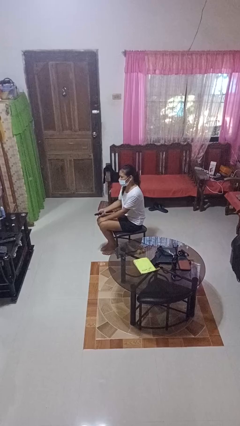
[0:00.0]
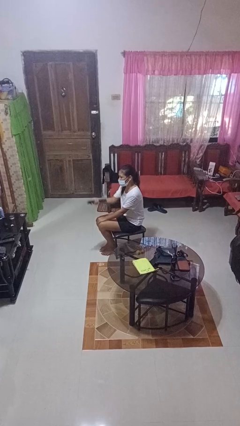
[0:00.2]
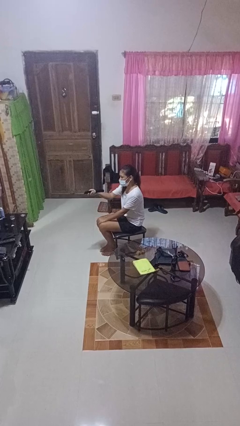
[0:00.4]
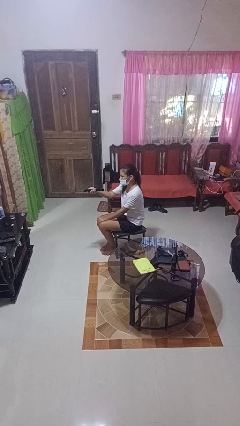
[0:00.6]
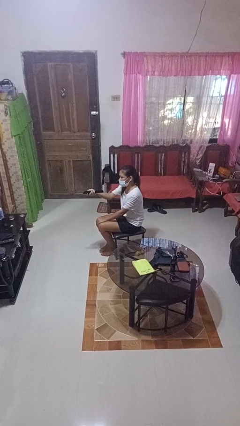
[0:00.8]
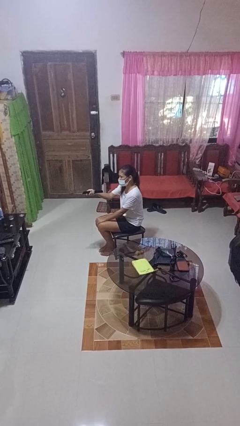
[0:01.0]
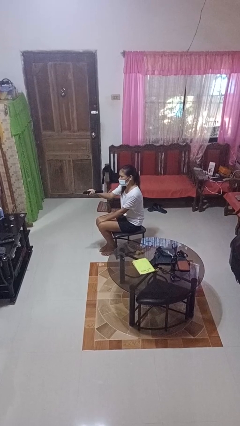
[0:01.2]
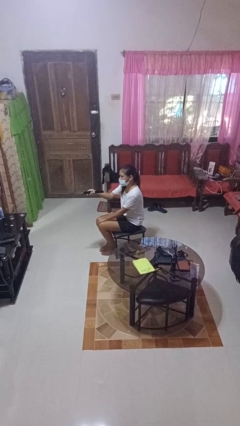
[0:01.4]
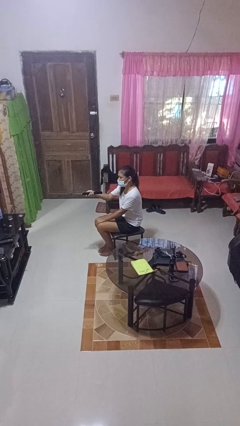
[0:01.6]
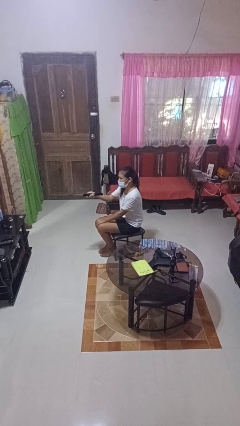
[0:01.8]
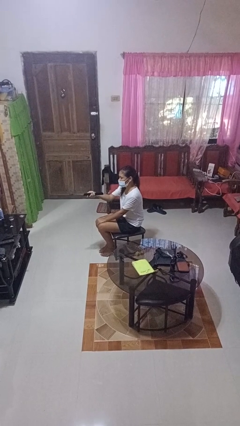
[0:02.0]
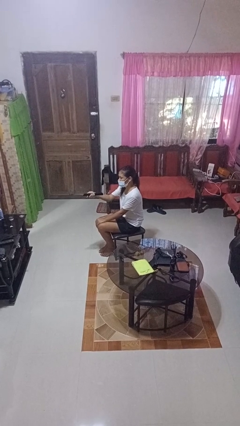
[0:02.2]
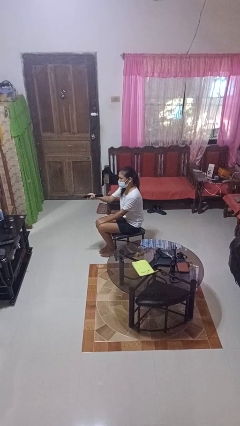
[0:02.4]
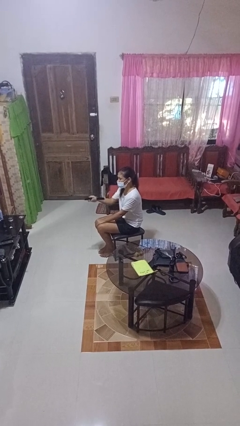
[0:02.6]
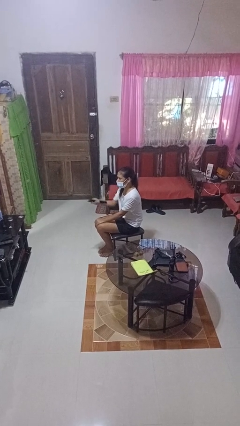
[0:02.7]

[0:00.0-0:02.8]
person uses television remote

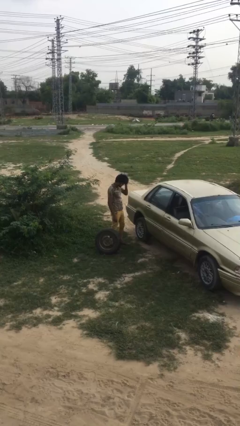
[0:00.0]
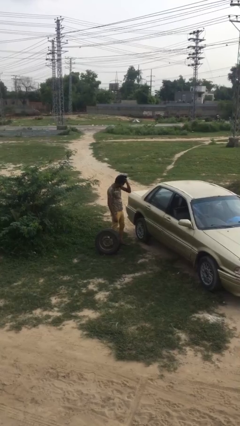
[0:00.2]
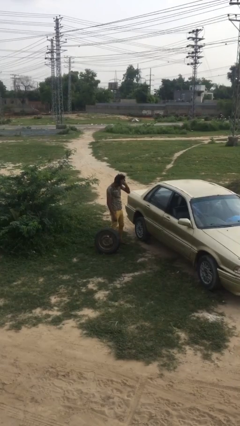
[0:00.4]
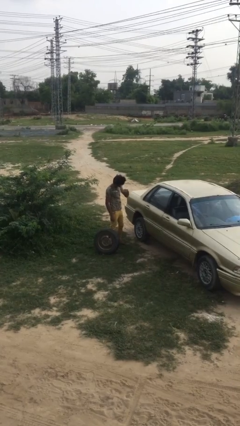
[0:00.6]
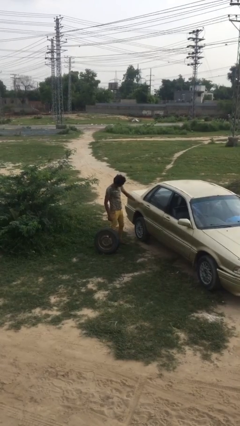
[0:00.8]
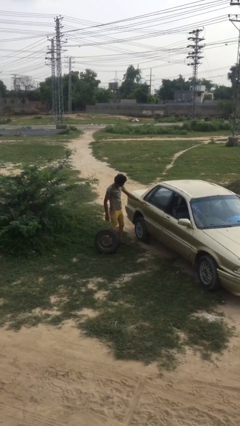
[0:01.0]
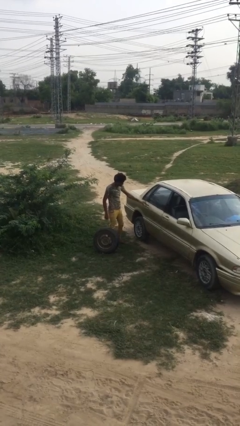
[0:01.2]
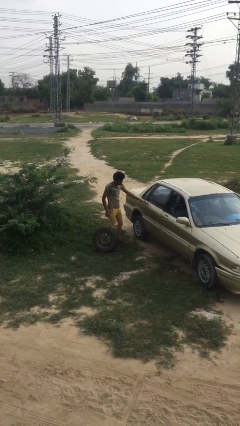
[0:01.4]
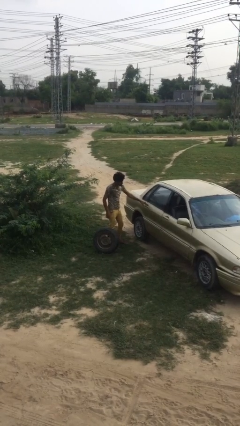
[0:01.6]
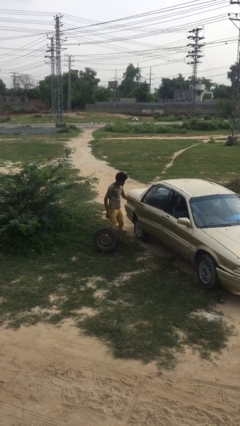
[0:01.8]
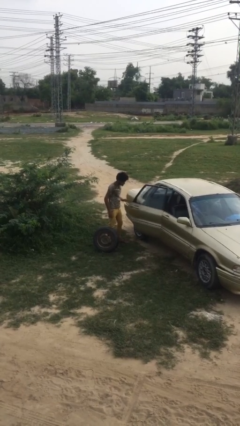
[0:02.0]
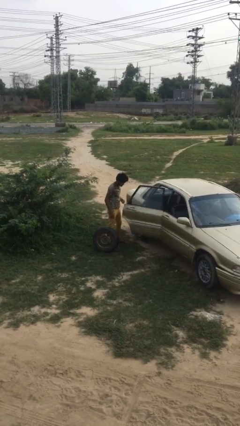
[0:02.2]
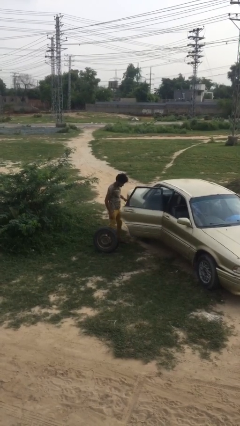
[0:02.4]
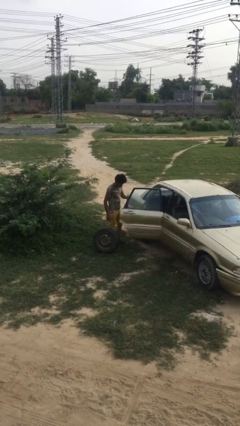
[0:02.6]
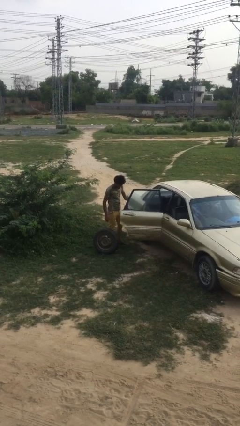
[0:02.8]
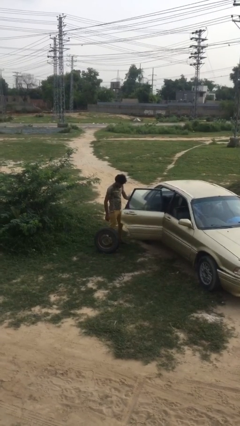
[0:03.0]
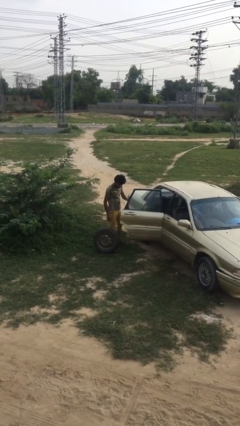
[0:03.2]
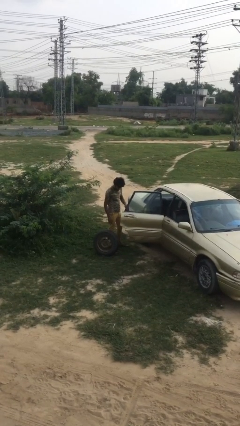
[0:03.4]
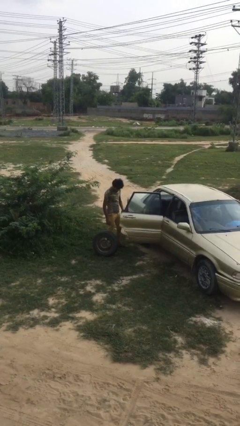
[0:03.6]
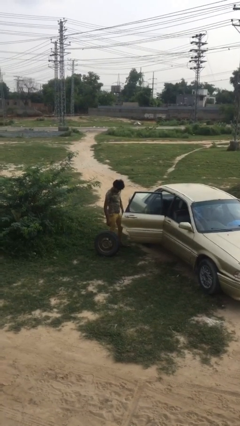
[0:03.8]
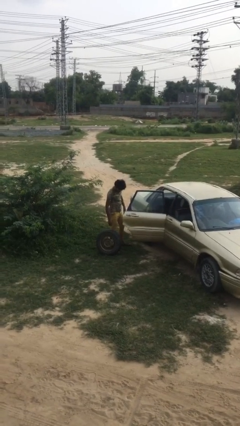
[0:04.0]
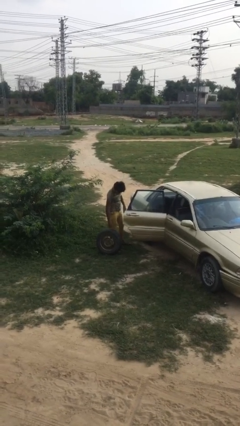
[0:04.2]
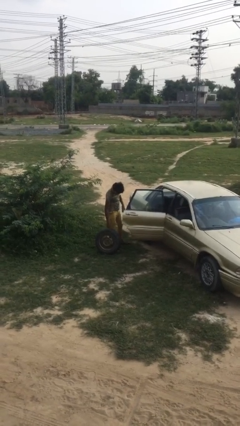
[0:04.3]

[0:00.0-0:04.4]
person opens car door

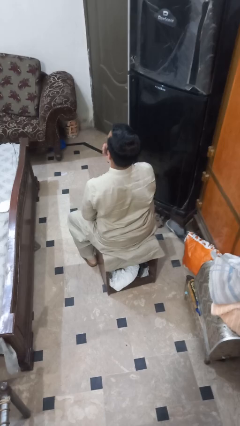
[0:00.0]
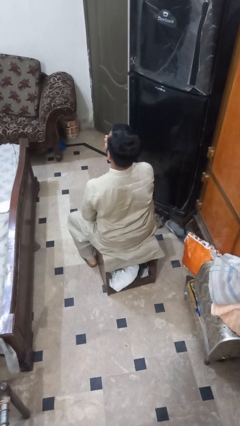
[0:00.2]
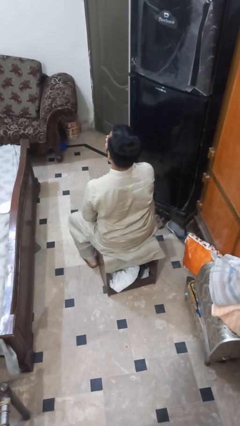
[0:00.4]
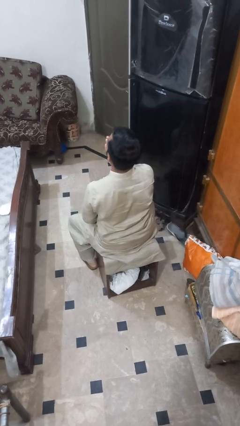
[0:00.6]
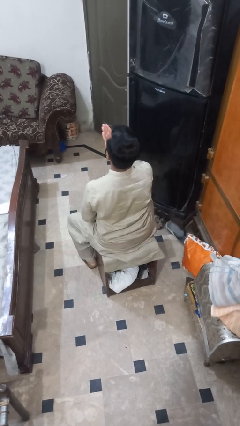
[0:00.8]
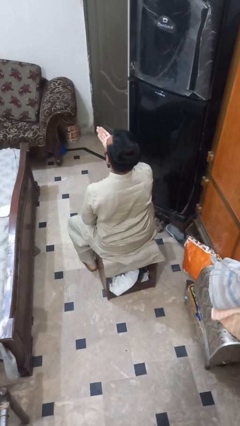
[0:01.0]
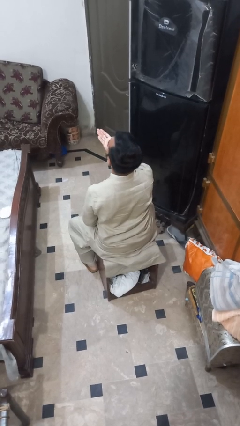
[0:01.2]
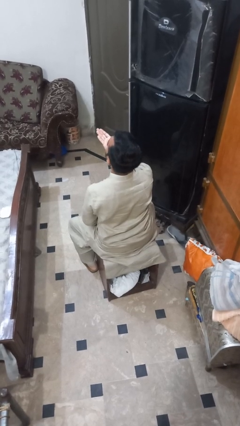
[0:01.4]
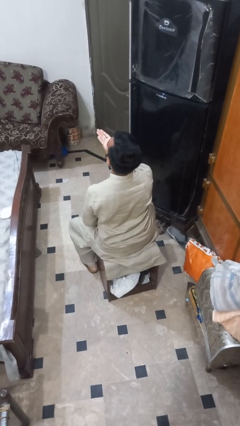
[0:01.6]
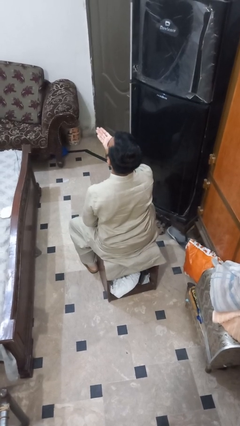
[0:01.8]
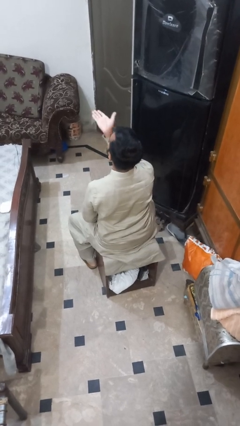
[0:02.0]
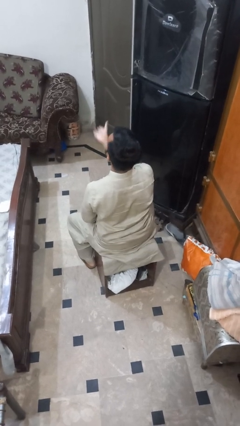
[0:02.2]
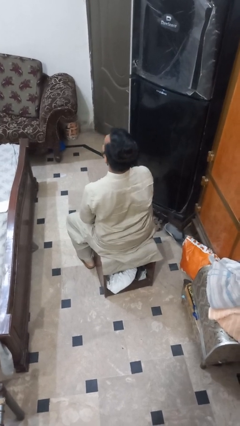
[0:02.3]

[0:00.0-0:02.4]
person gestures blow kiss

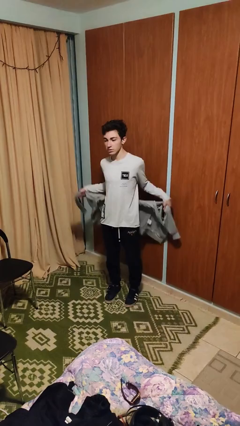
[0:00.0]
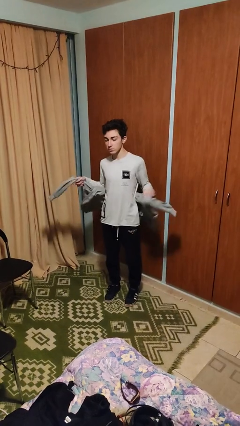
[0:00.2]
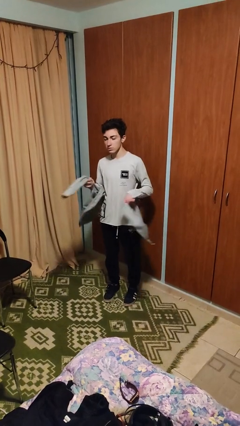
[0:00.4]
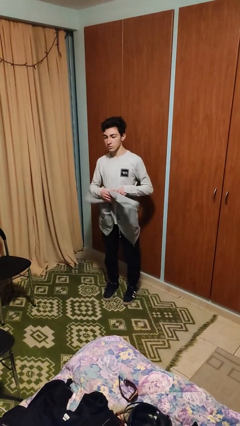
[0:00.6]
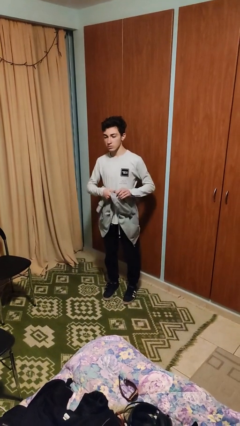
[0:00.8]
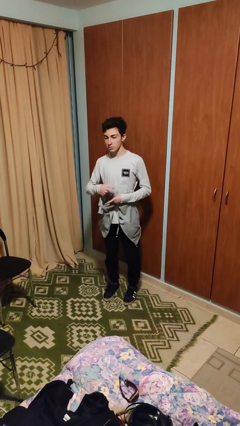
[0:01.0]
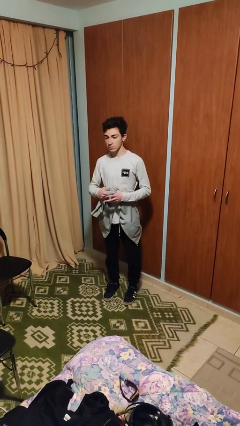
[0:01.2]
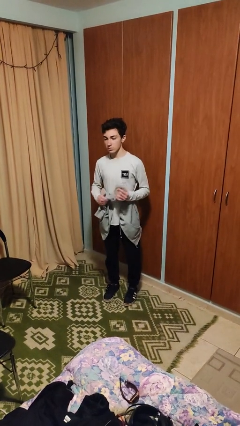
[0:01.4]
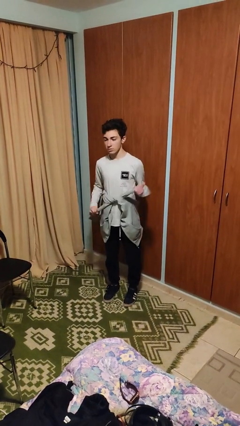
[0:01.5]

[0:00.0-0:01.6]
person ties jacket around waist

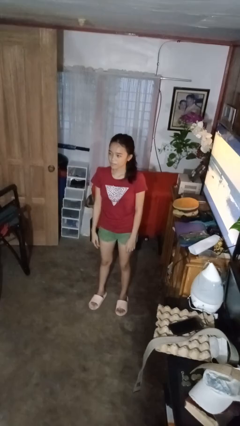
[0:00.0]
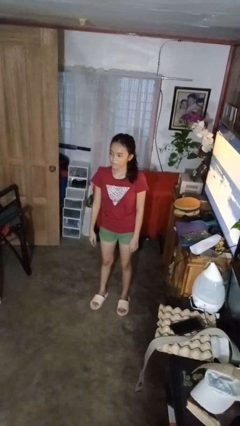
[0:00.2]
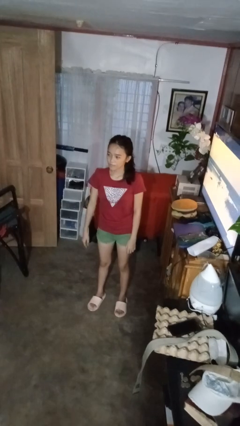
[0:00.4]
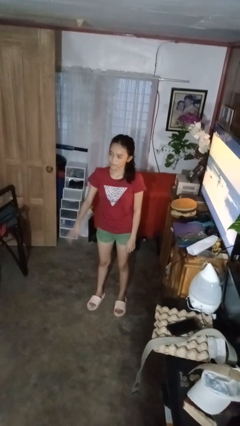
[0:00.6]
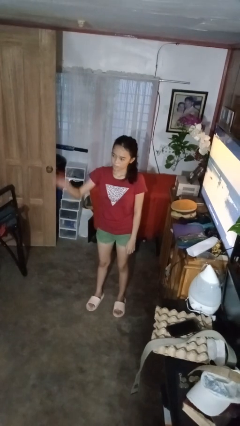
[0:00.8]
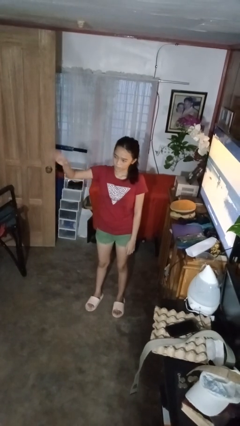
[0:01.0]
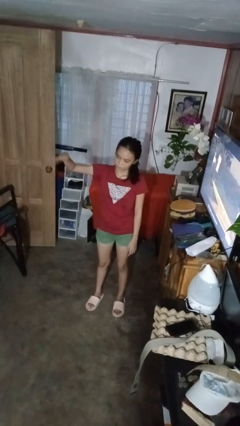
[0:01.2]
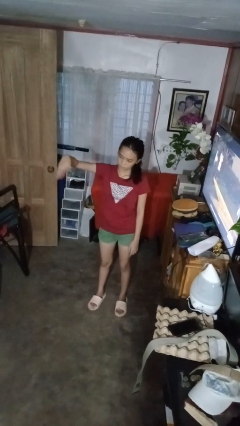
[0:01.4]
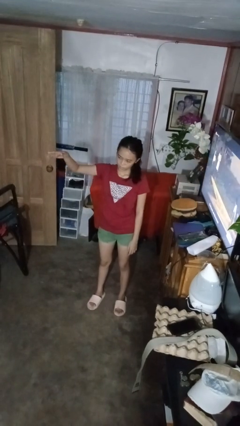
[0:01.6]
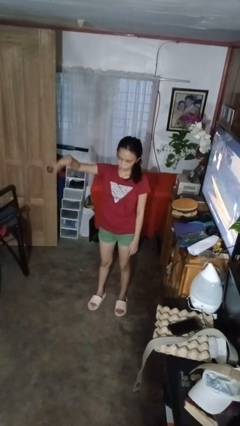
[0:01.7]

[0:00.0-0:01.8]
person gestures come here

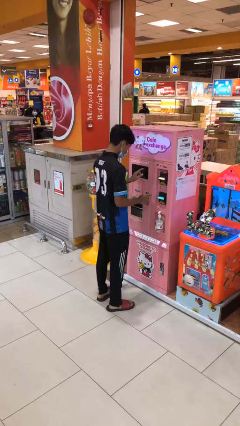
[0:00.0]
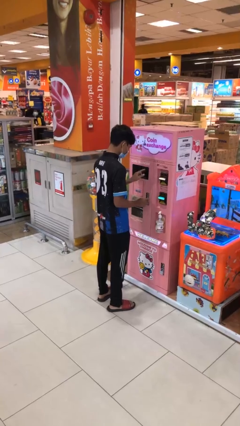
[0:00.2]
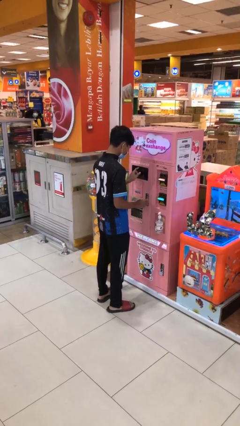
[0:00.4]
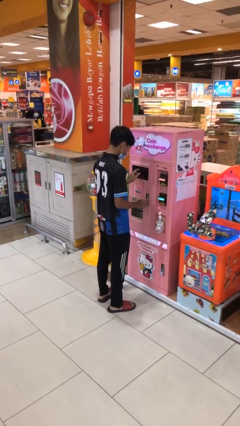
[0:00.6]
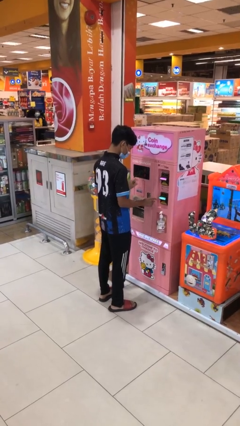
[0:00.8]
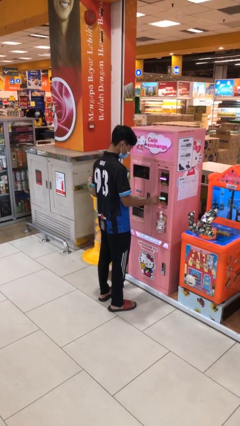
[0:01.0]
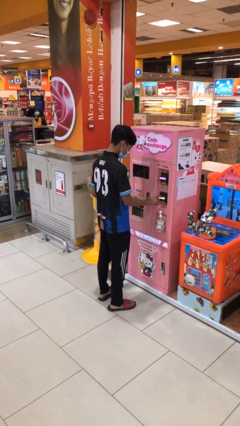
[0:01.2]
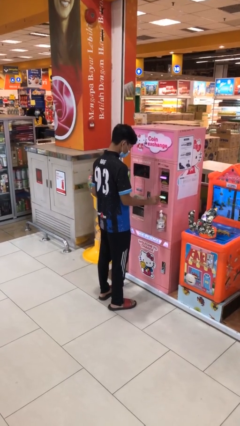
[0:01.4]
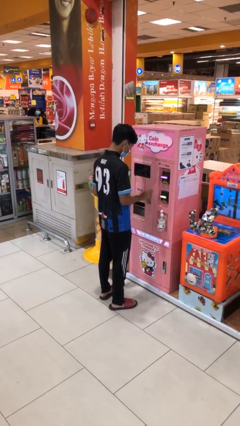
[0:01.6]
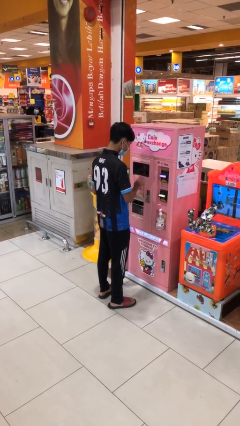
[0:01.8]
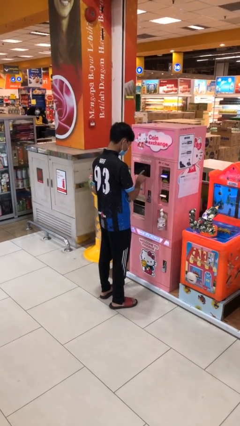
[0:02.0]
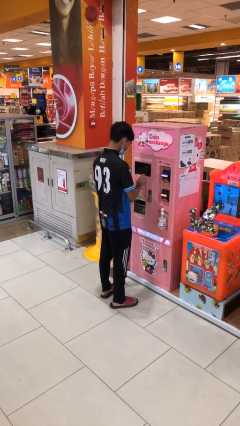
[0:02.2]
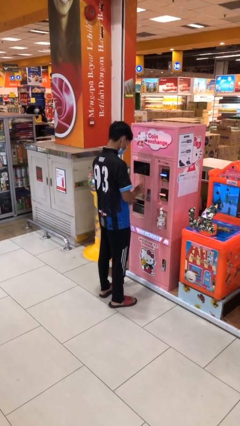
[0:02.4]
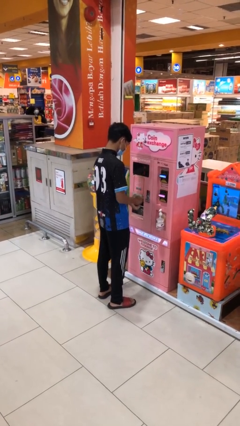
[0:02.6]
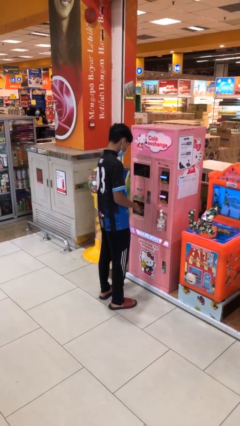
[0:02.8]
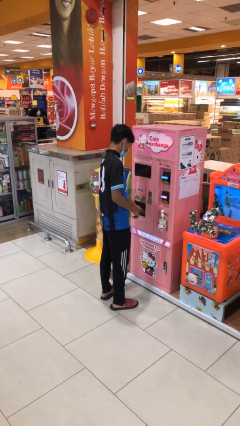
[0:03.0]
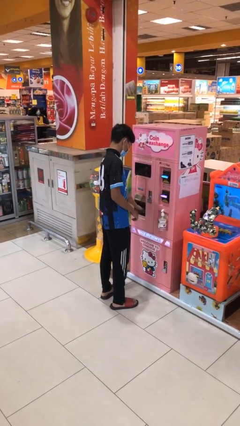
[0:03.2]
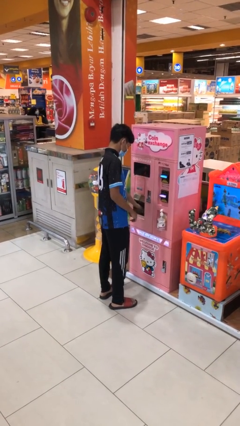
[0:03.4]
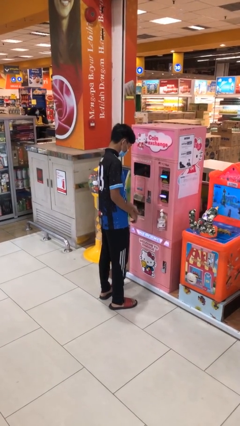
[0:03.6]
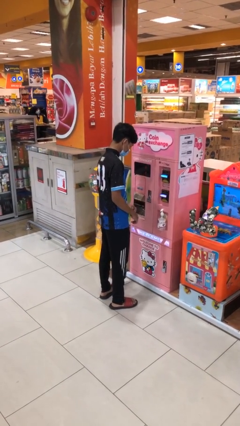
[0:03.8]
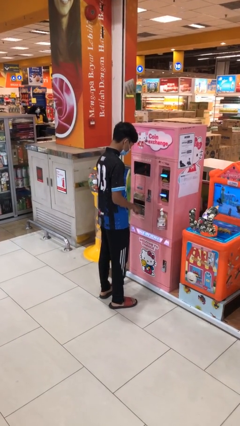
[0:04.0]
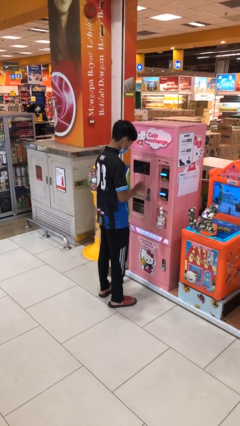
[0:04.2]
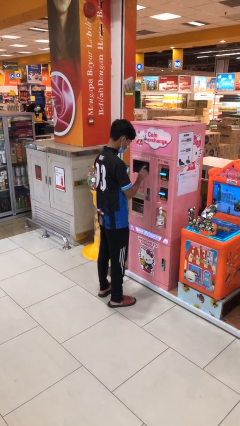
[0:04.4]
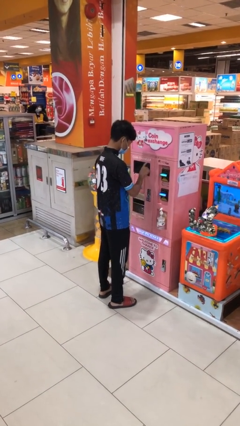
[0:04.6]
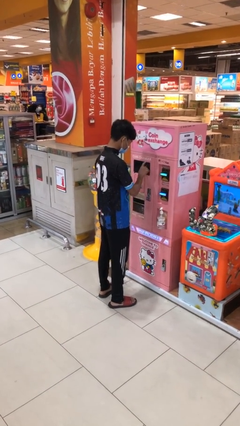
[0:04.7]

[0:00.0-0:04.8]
person purchases from machine
